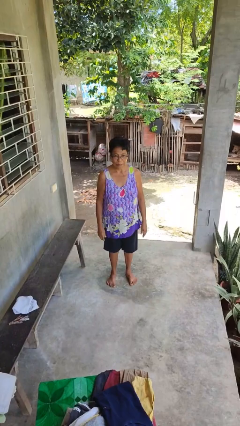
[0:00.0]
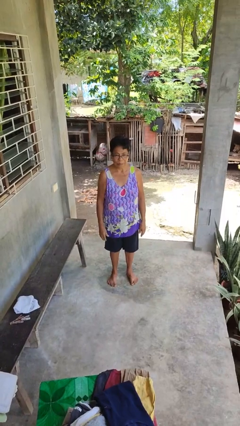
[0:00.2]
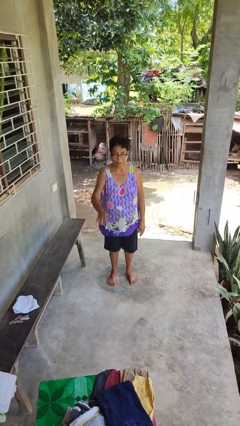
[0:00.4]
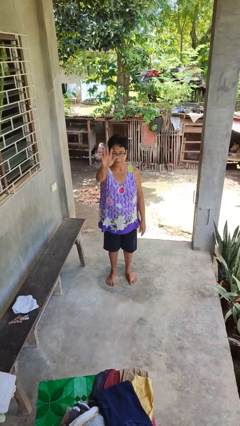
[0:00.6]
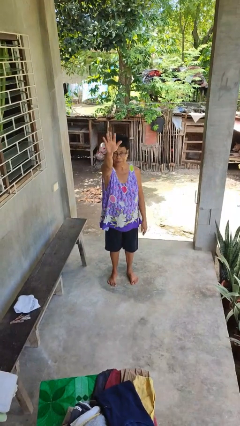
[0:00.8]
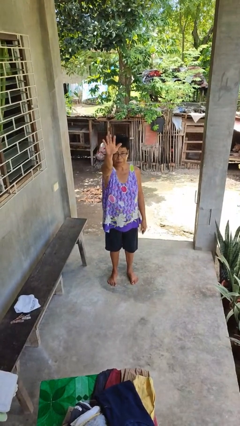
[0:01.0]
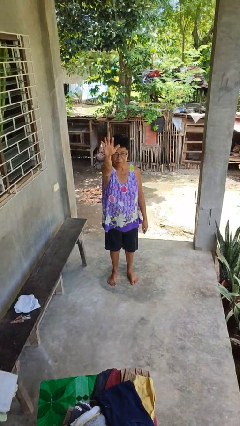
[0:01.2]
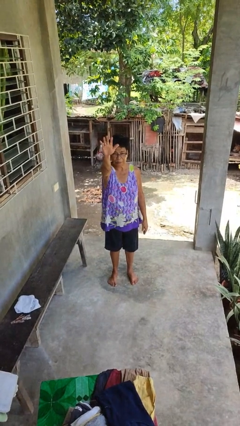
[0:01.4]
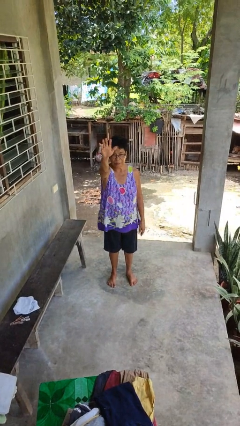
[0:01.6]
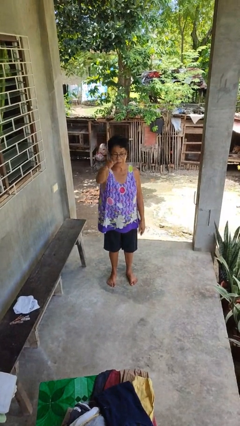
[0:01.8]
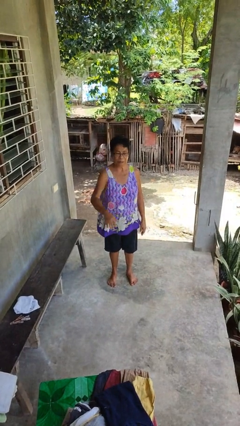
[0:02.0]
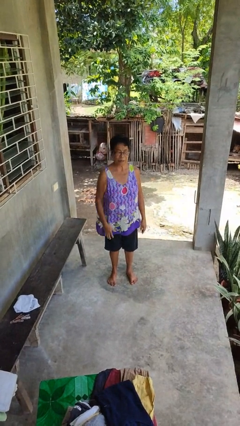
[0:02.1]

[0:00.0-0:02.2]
person gestures stop

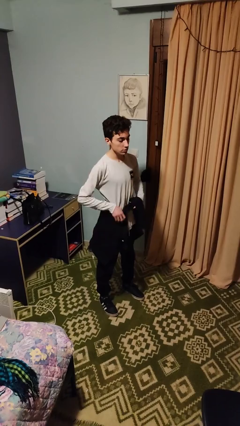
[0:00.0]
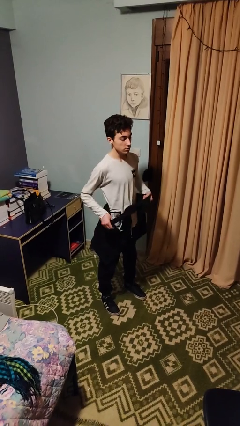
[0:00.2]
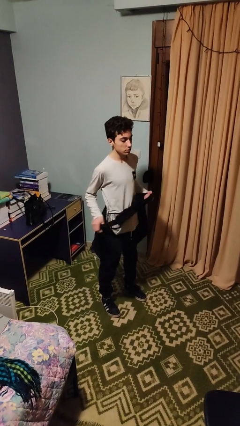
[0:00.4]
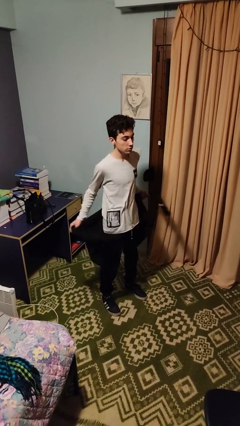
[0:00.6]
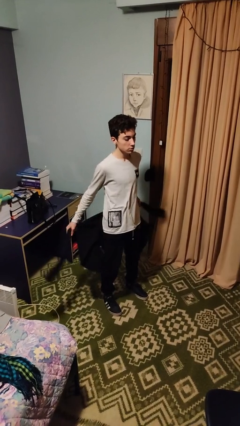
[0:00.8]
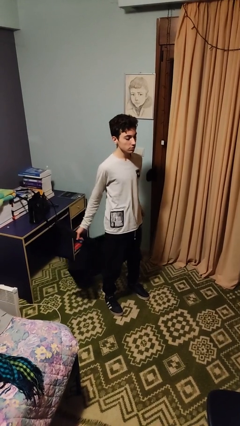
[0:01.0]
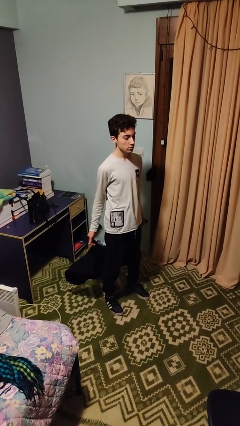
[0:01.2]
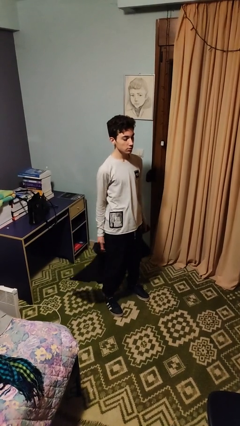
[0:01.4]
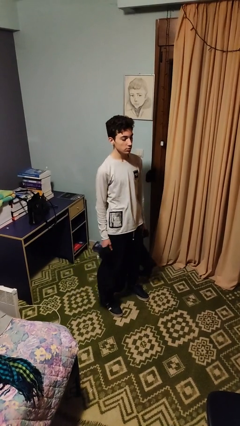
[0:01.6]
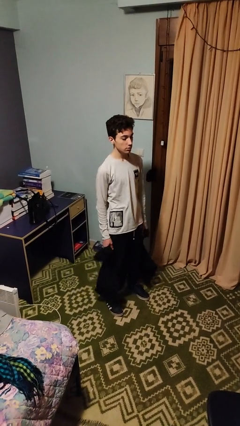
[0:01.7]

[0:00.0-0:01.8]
person unties jacket around waist

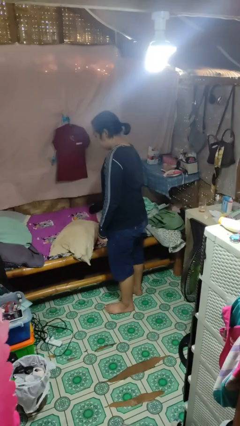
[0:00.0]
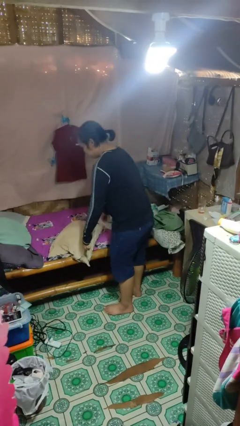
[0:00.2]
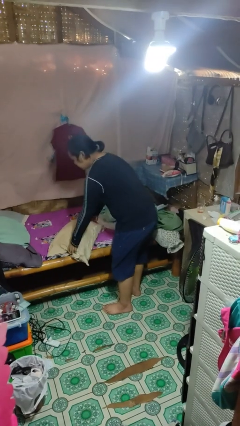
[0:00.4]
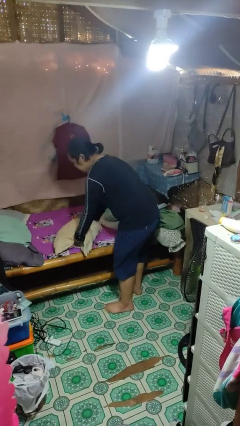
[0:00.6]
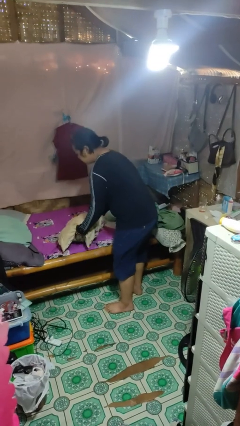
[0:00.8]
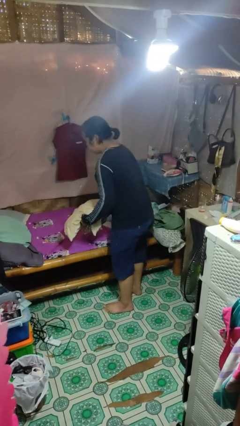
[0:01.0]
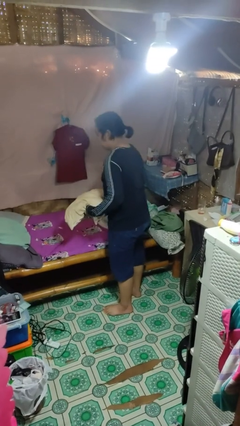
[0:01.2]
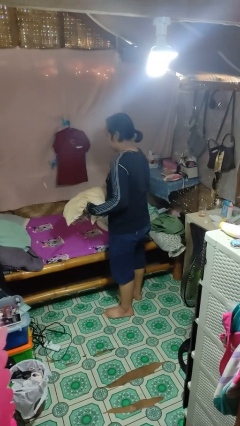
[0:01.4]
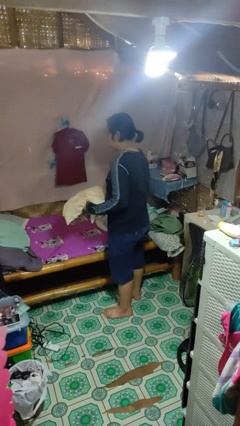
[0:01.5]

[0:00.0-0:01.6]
person picks up object from bed

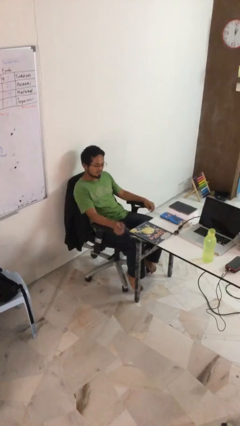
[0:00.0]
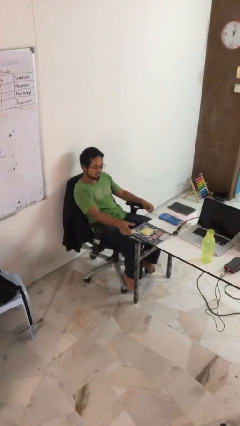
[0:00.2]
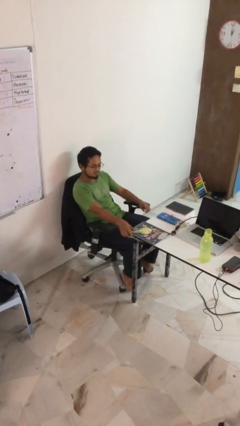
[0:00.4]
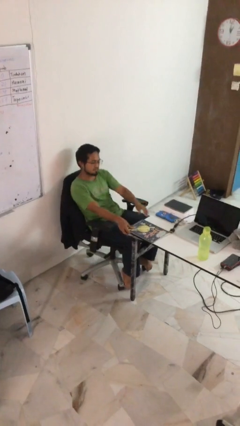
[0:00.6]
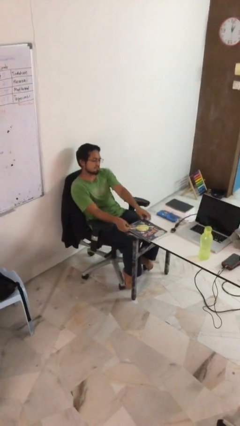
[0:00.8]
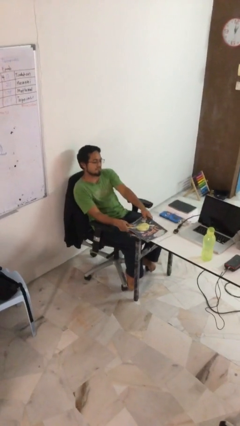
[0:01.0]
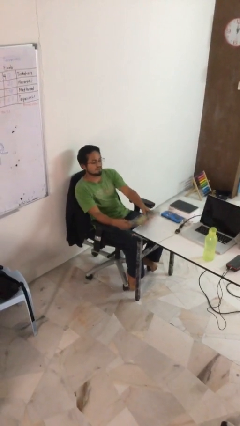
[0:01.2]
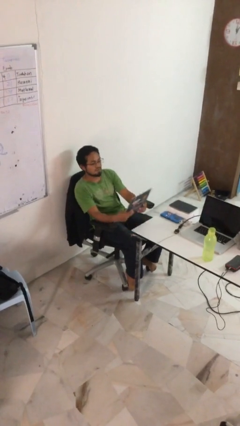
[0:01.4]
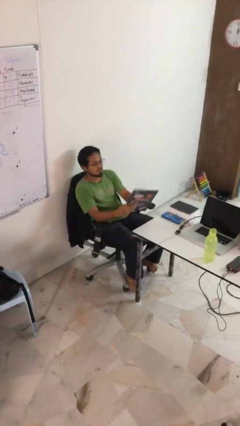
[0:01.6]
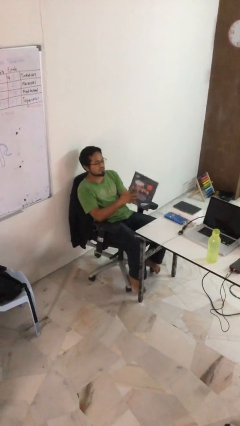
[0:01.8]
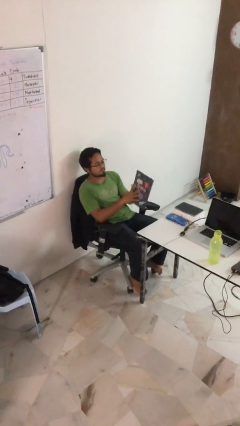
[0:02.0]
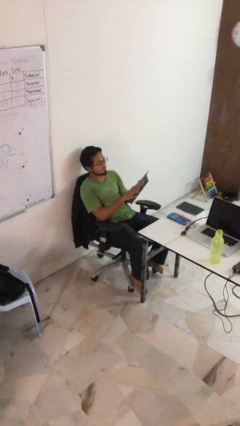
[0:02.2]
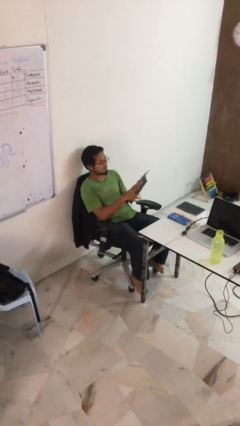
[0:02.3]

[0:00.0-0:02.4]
person picks up object from table

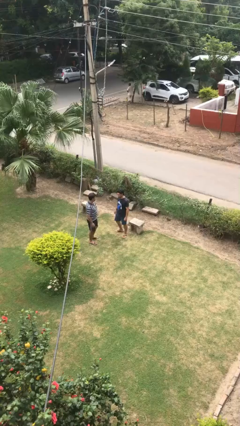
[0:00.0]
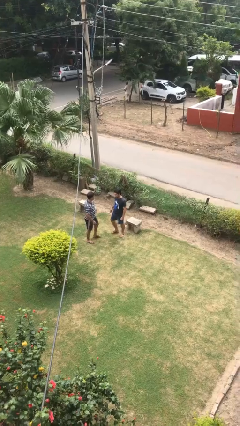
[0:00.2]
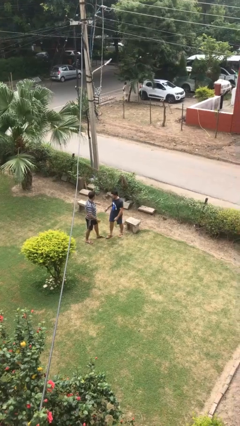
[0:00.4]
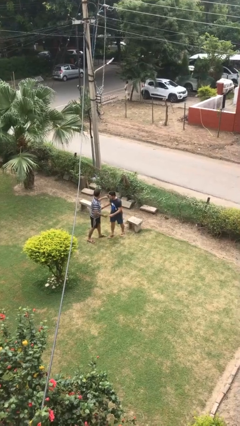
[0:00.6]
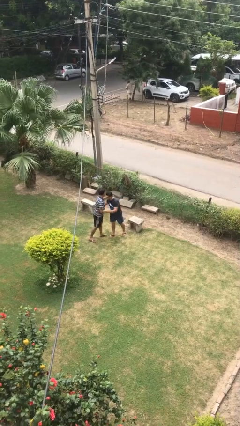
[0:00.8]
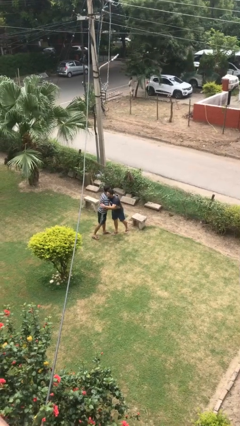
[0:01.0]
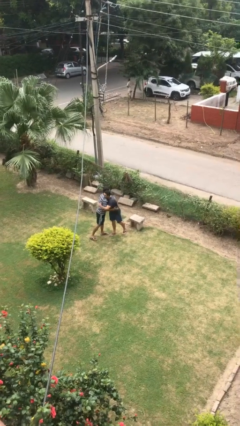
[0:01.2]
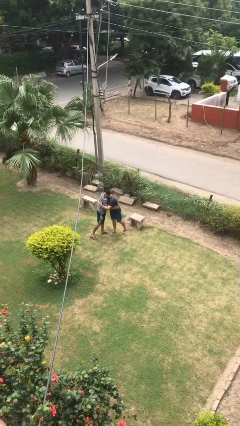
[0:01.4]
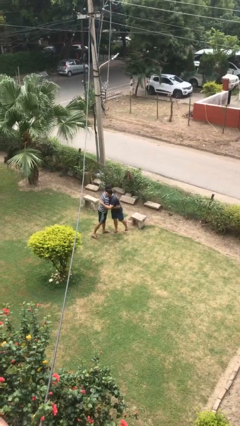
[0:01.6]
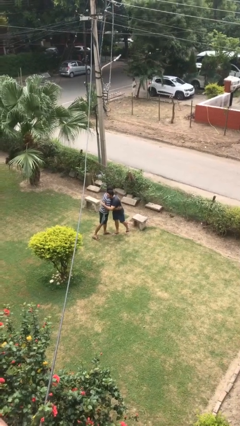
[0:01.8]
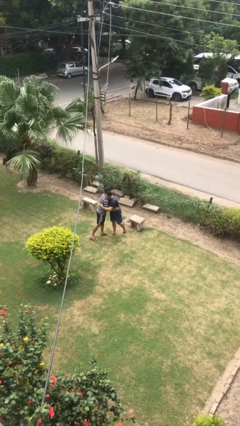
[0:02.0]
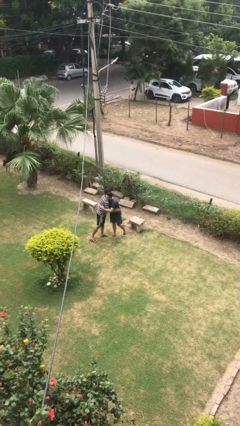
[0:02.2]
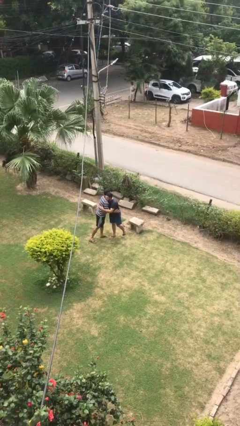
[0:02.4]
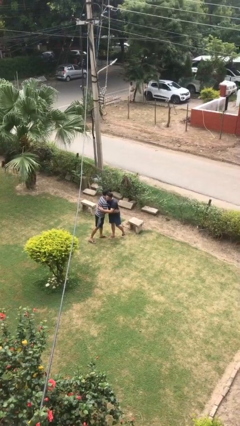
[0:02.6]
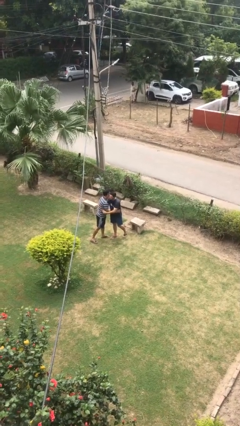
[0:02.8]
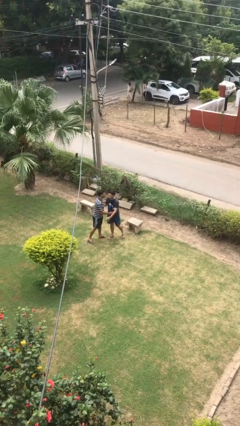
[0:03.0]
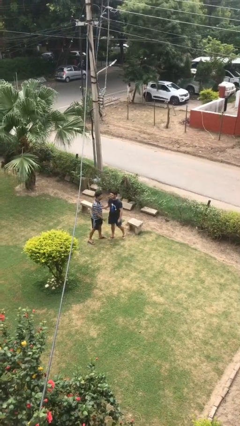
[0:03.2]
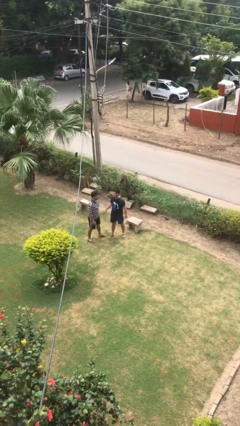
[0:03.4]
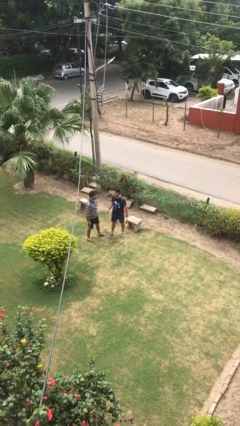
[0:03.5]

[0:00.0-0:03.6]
person embraces person

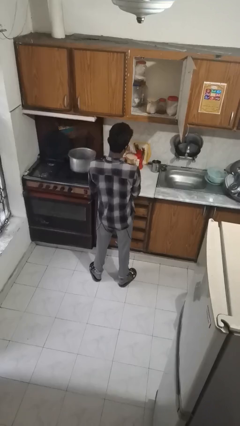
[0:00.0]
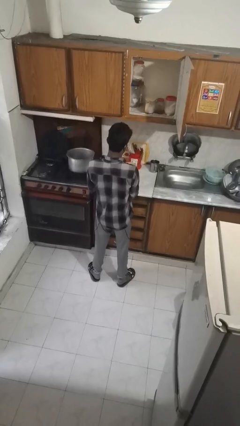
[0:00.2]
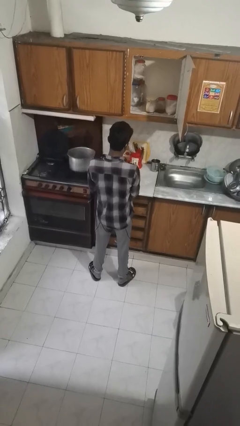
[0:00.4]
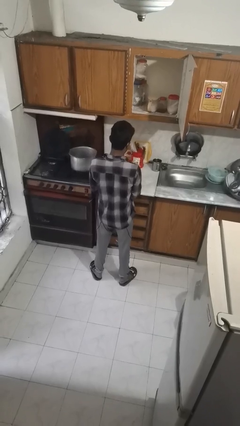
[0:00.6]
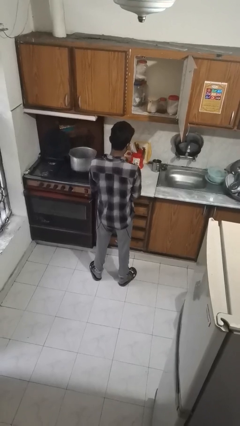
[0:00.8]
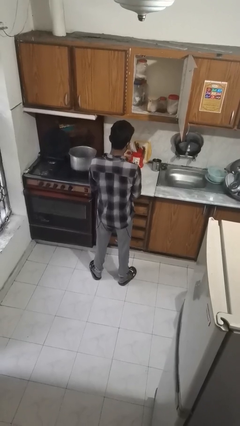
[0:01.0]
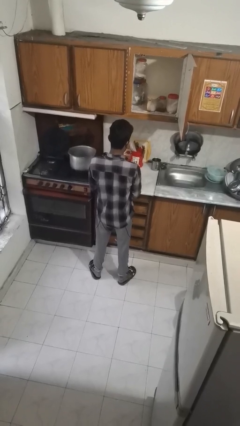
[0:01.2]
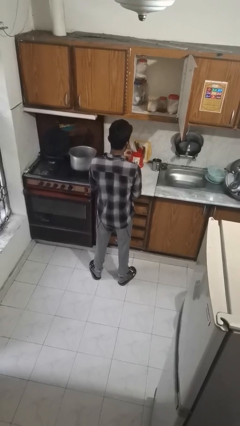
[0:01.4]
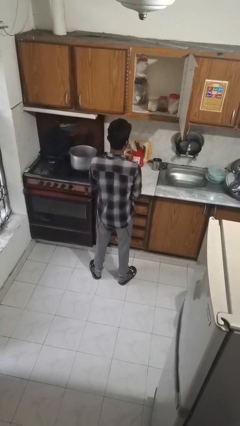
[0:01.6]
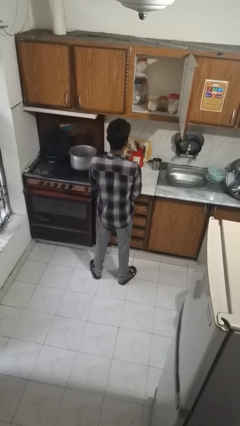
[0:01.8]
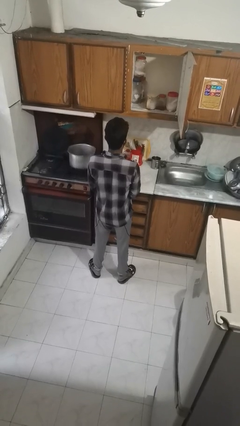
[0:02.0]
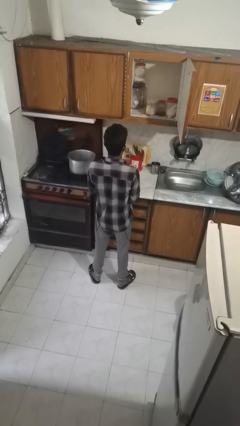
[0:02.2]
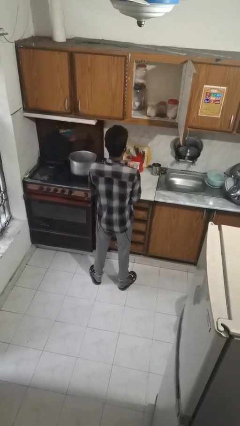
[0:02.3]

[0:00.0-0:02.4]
person puts down object into cabinet

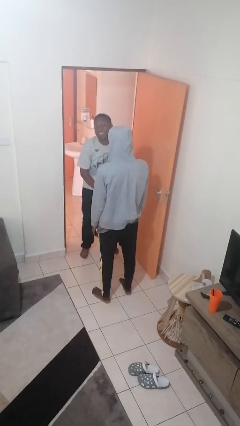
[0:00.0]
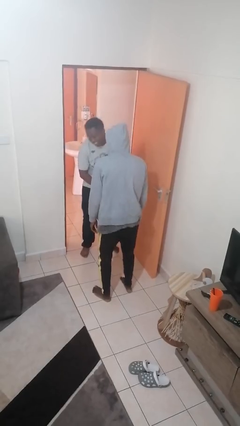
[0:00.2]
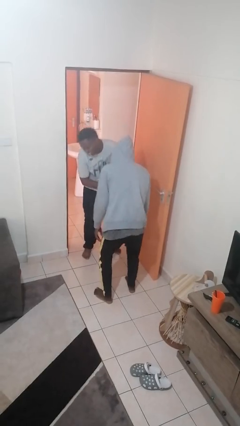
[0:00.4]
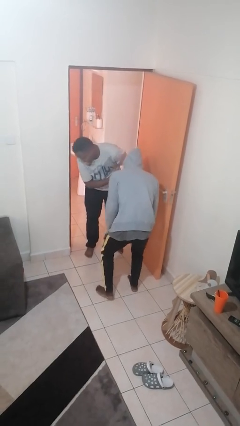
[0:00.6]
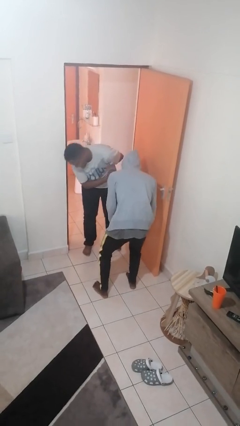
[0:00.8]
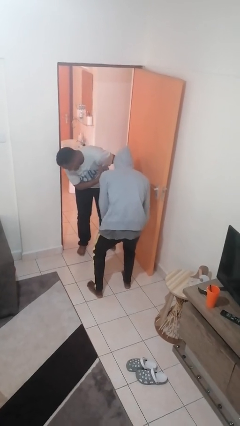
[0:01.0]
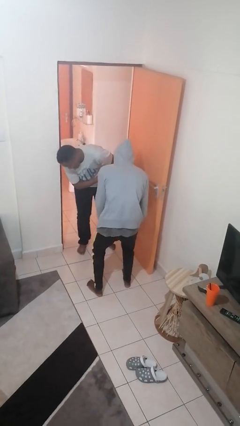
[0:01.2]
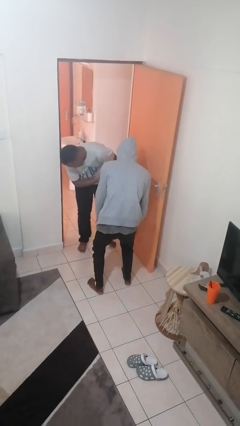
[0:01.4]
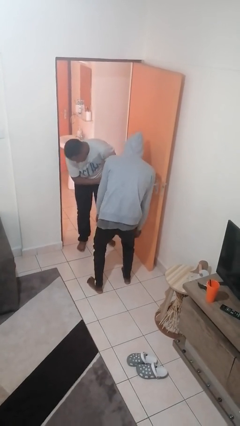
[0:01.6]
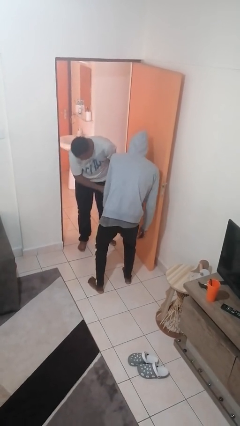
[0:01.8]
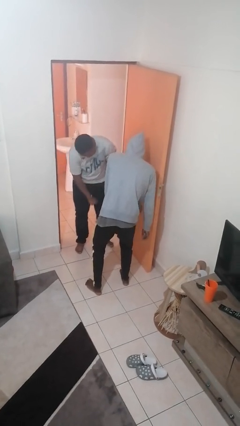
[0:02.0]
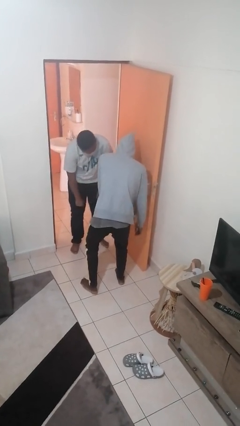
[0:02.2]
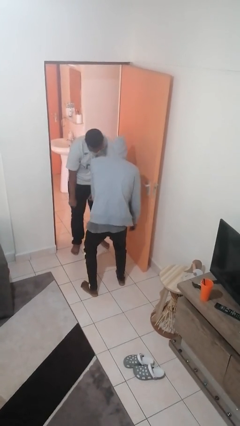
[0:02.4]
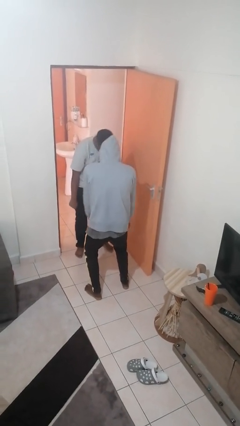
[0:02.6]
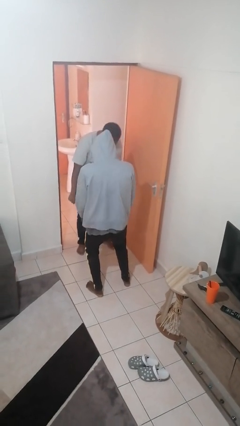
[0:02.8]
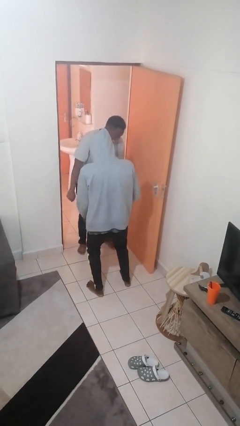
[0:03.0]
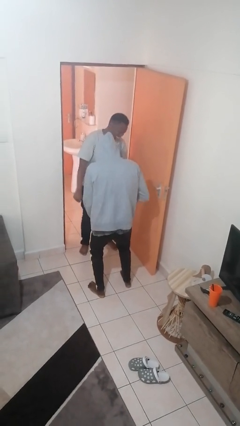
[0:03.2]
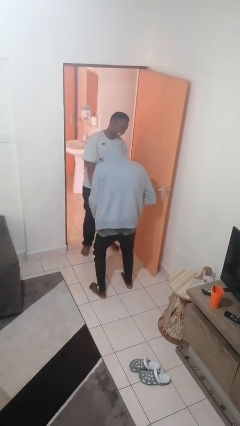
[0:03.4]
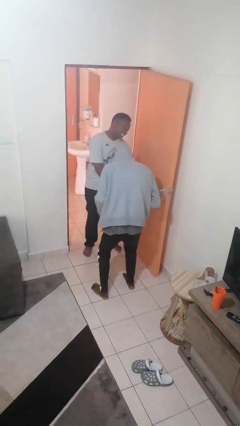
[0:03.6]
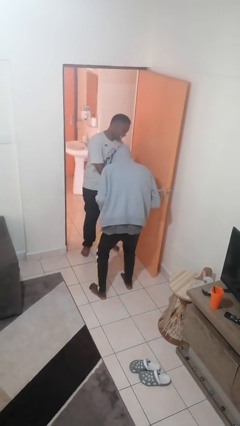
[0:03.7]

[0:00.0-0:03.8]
person laughs with person
